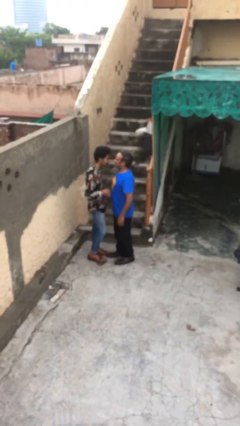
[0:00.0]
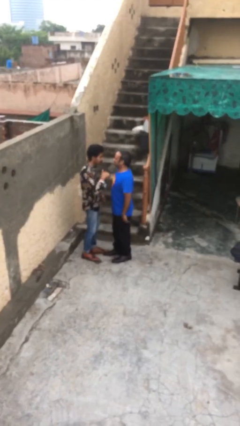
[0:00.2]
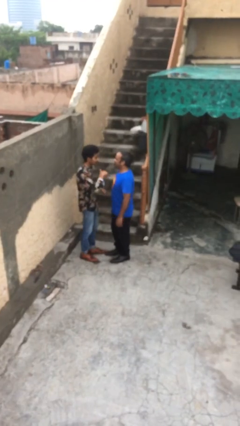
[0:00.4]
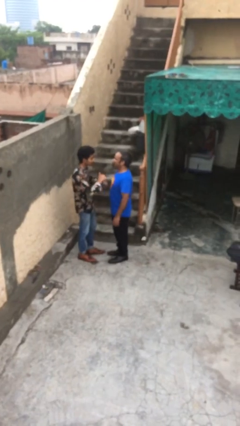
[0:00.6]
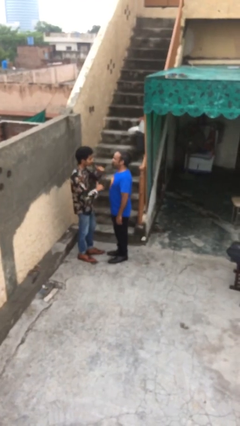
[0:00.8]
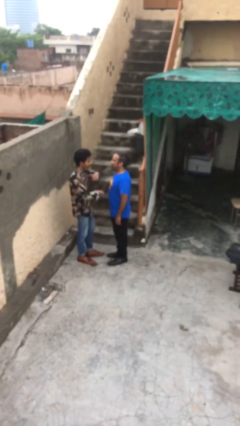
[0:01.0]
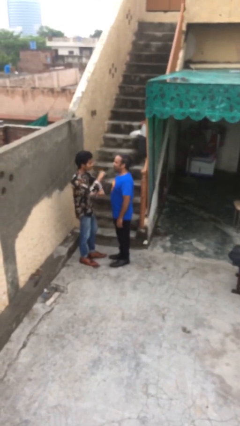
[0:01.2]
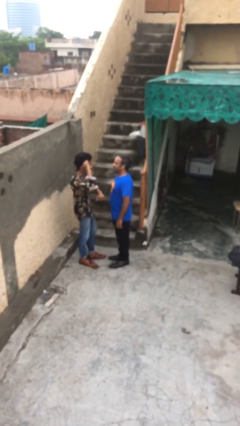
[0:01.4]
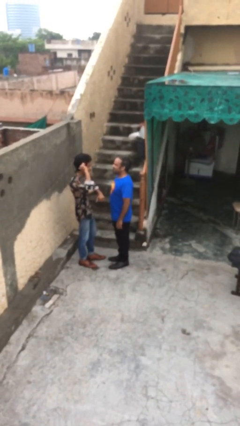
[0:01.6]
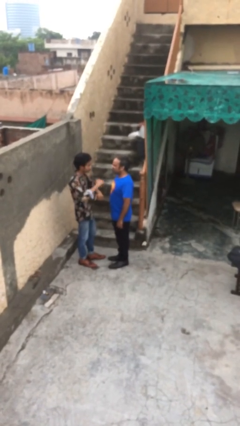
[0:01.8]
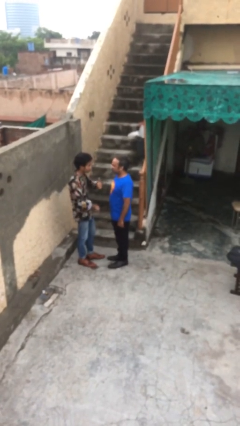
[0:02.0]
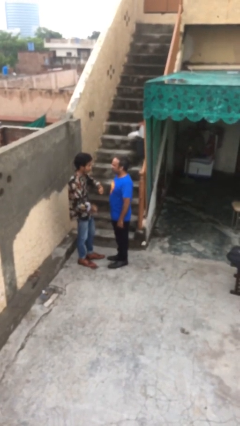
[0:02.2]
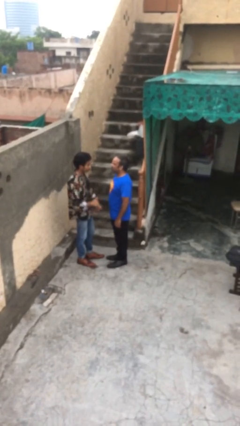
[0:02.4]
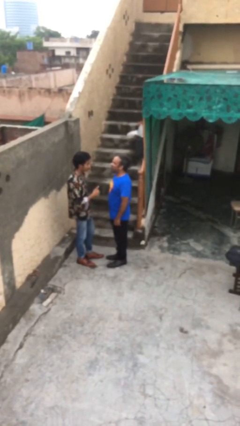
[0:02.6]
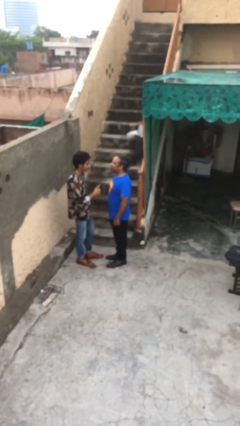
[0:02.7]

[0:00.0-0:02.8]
person talks to person

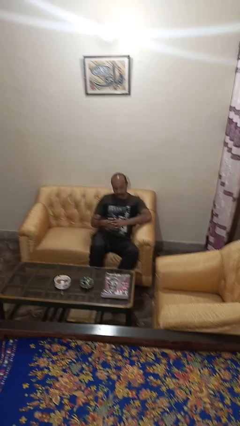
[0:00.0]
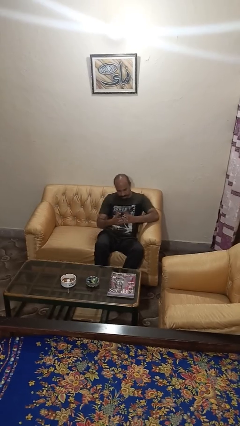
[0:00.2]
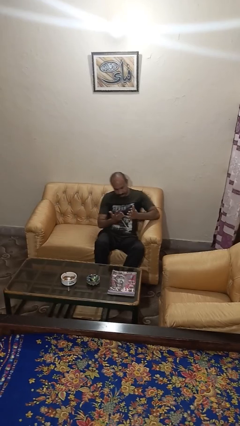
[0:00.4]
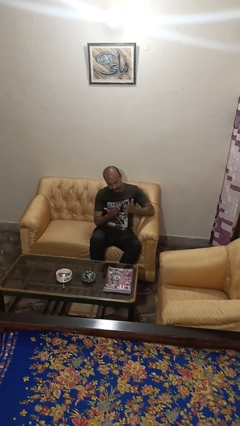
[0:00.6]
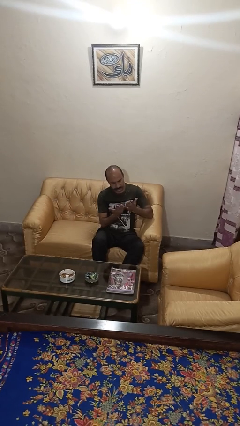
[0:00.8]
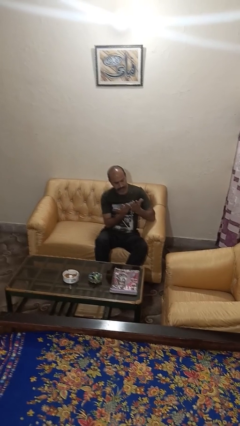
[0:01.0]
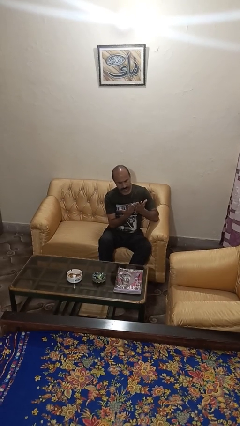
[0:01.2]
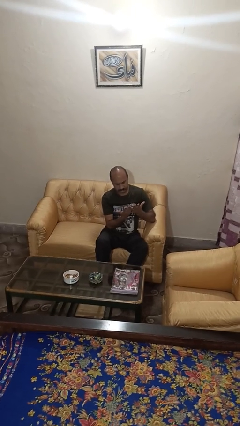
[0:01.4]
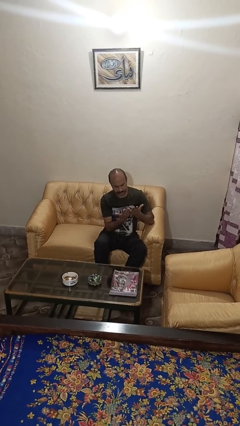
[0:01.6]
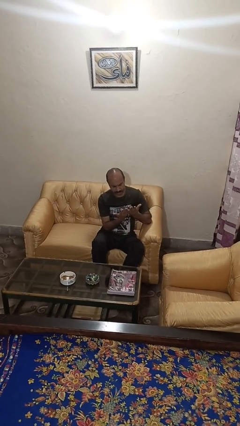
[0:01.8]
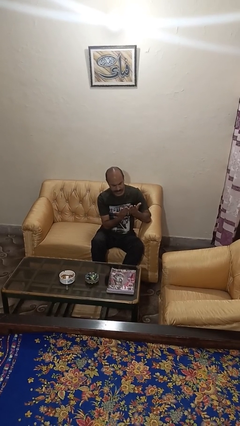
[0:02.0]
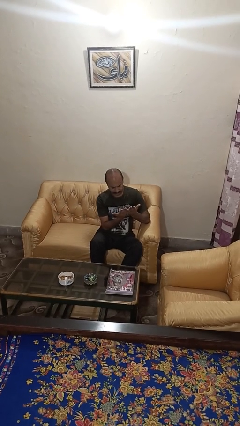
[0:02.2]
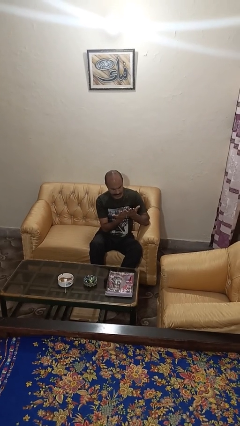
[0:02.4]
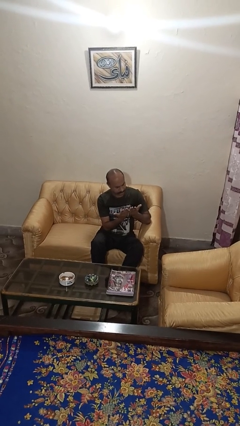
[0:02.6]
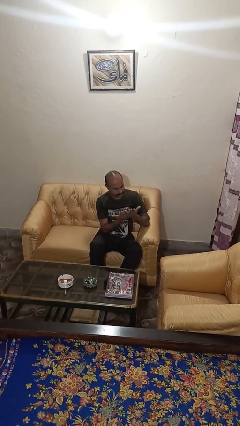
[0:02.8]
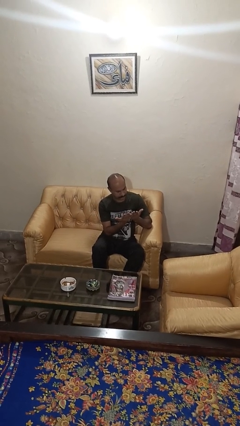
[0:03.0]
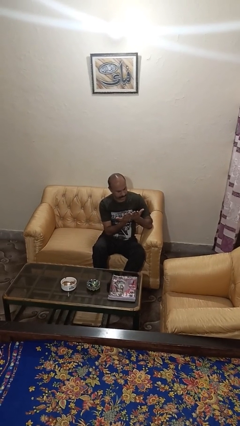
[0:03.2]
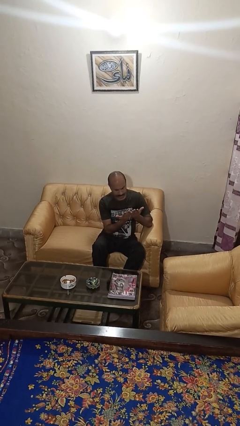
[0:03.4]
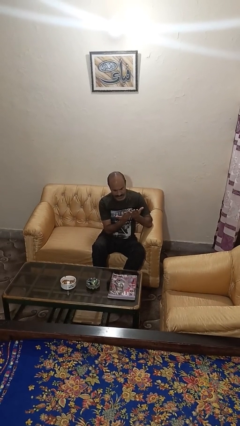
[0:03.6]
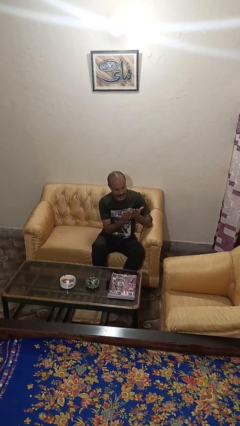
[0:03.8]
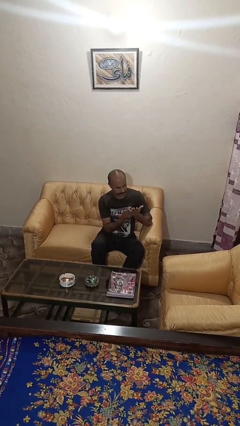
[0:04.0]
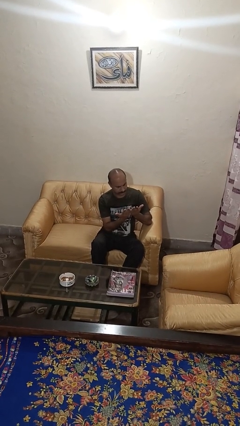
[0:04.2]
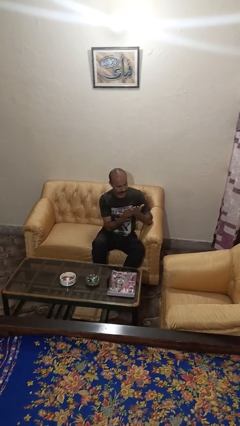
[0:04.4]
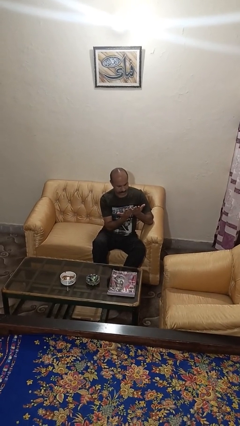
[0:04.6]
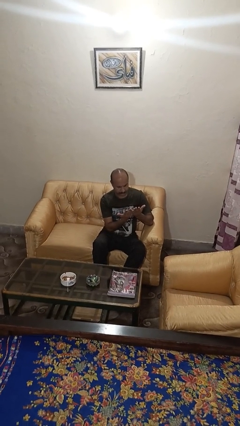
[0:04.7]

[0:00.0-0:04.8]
person looks at hands in lap

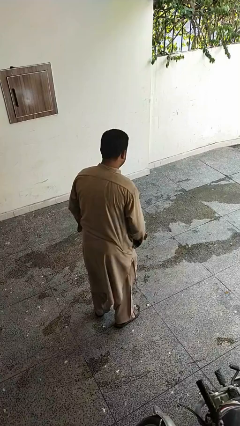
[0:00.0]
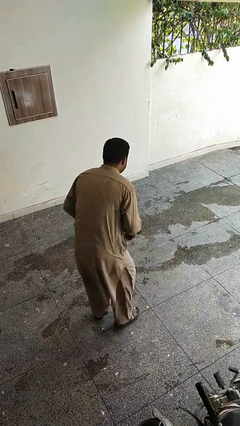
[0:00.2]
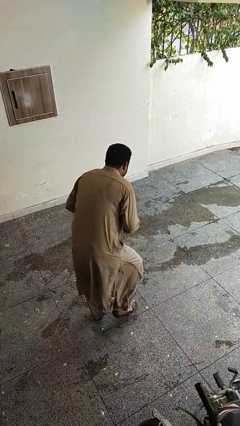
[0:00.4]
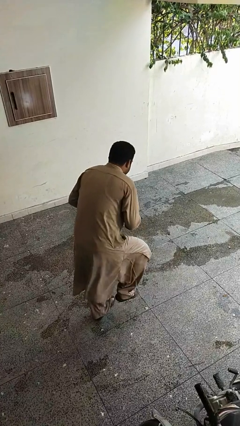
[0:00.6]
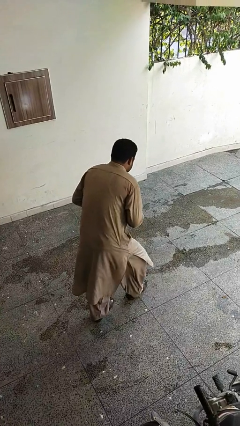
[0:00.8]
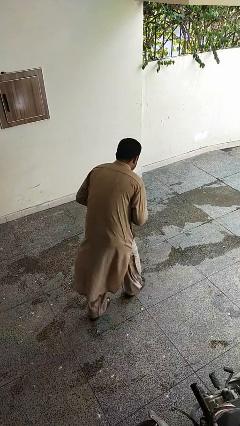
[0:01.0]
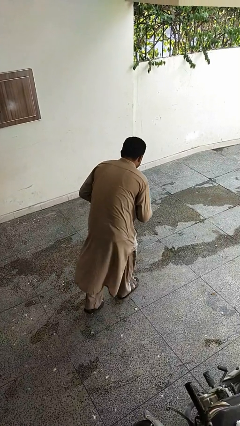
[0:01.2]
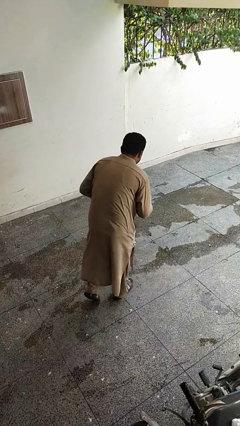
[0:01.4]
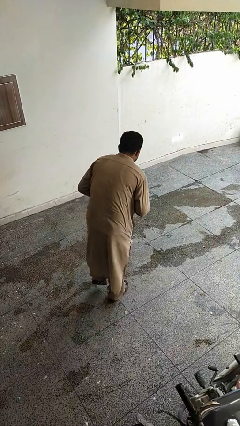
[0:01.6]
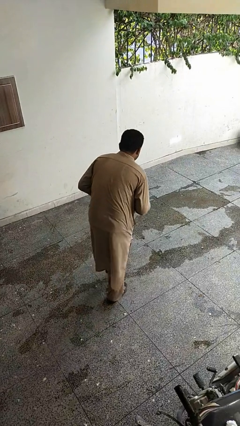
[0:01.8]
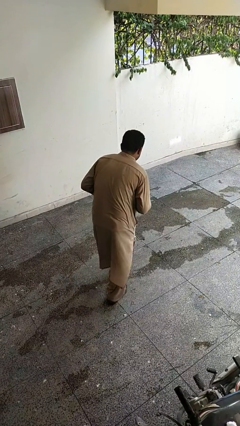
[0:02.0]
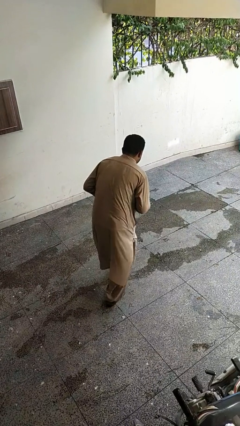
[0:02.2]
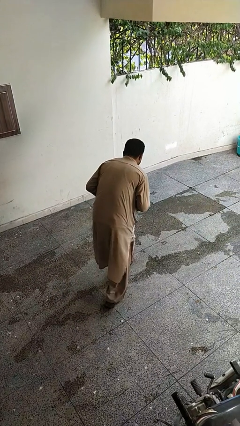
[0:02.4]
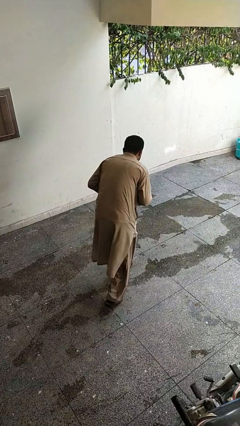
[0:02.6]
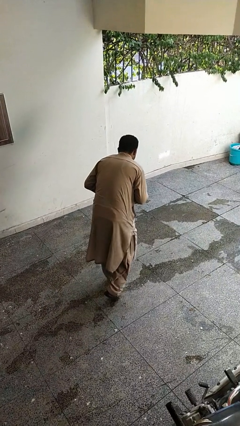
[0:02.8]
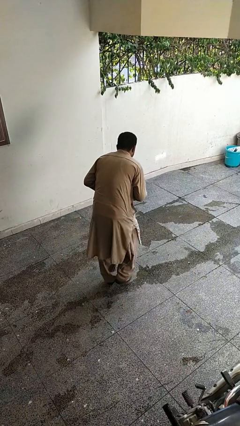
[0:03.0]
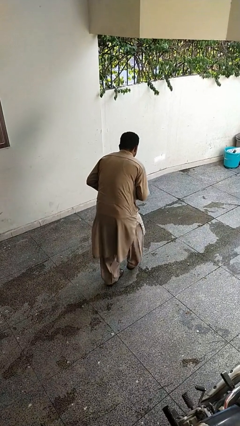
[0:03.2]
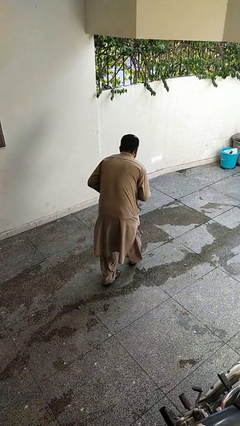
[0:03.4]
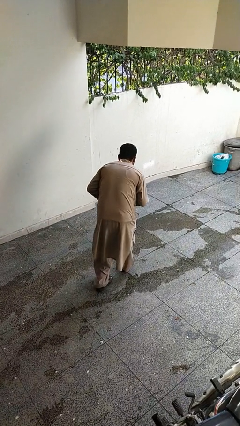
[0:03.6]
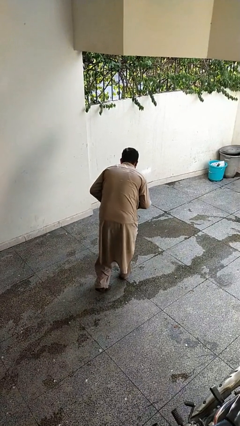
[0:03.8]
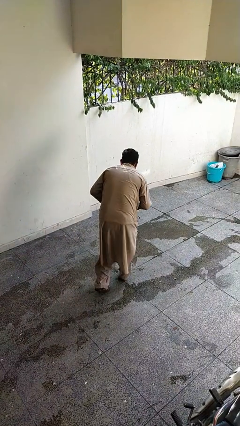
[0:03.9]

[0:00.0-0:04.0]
person walks tiptoe

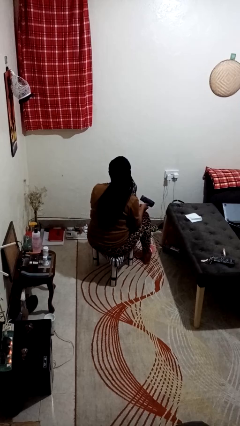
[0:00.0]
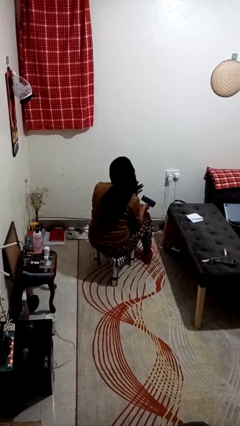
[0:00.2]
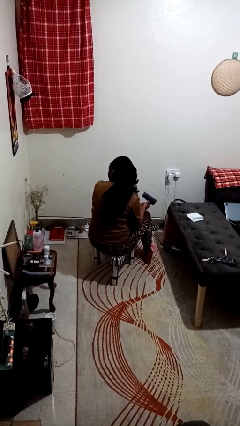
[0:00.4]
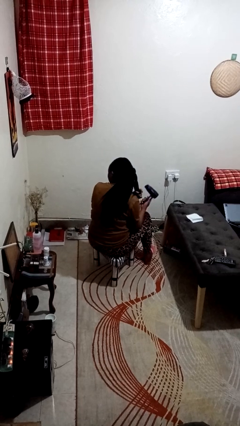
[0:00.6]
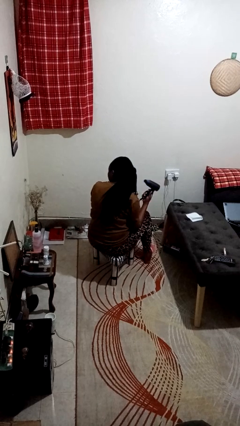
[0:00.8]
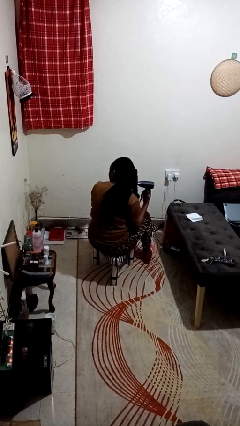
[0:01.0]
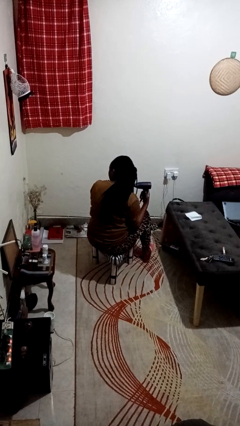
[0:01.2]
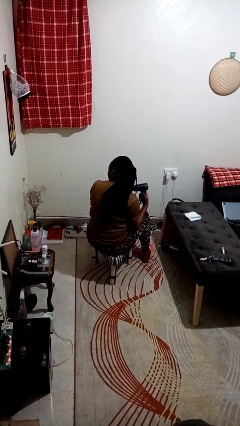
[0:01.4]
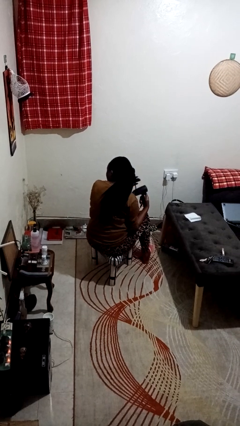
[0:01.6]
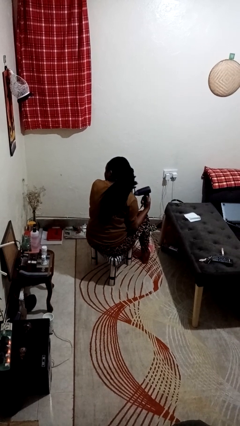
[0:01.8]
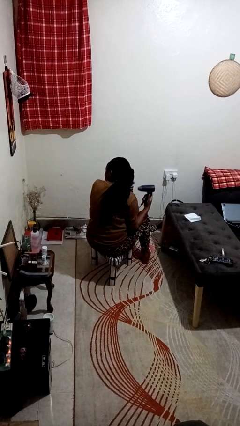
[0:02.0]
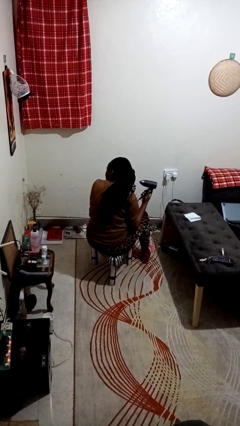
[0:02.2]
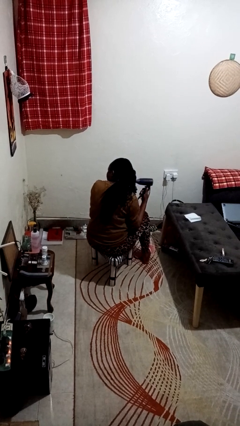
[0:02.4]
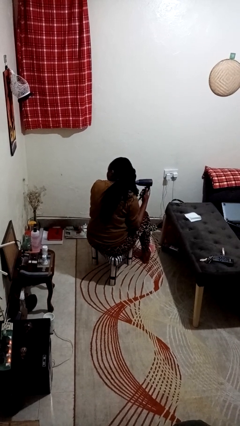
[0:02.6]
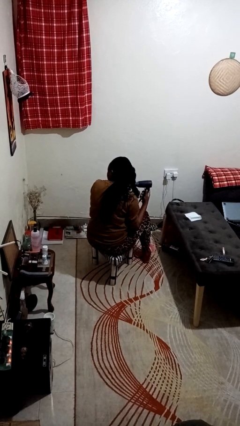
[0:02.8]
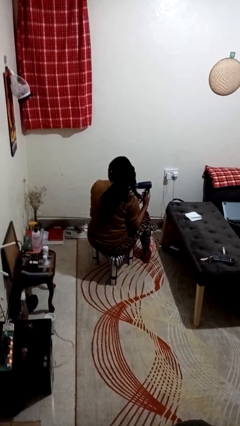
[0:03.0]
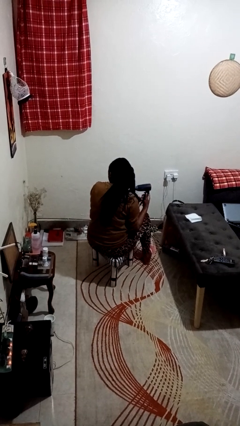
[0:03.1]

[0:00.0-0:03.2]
person dries hair with hairdryer

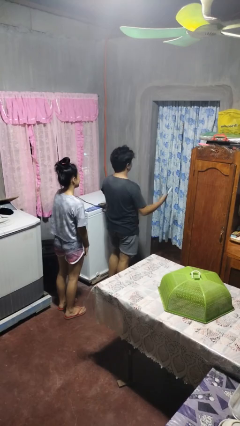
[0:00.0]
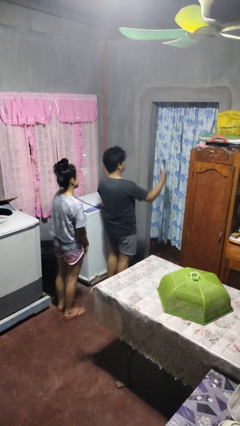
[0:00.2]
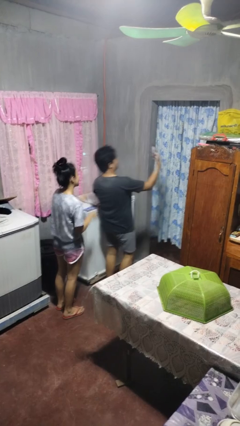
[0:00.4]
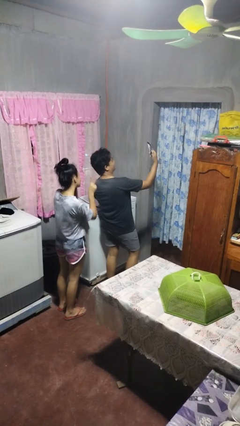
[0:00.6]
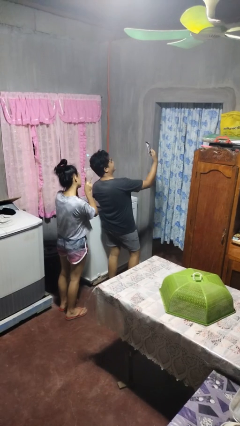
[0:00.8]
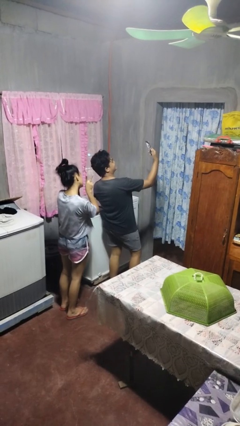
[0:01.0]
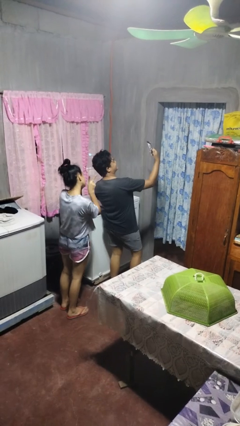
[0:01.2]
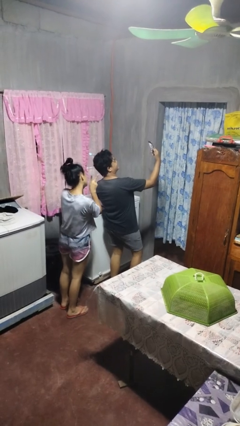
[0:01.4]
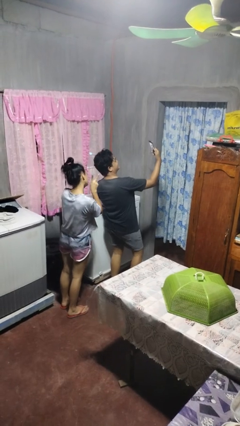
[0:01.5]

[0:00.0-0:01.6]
person takes selfie with person

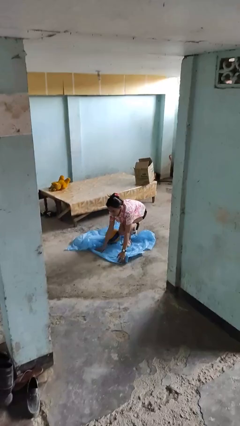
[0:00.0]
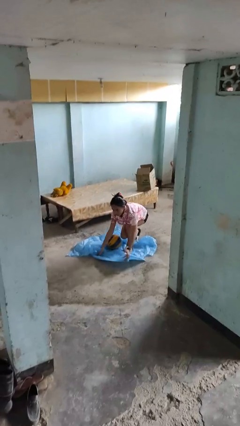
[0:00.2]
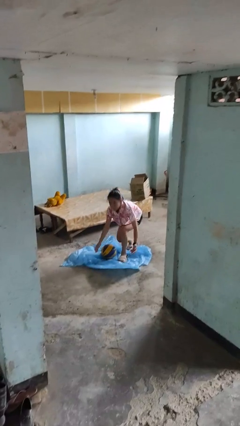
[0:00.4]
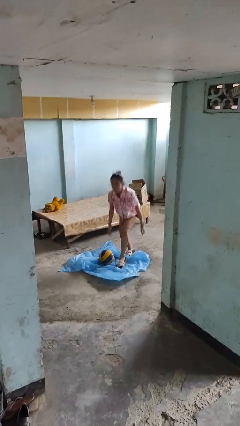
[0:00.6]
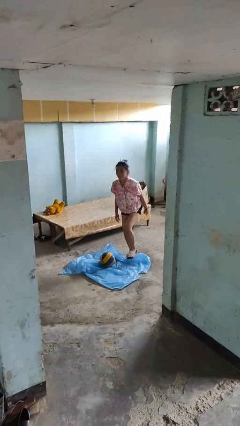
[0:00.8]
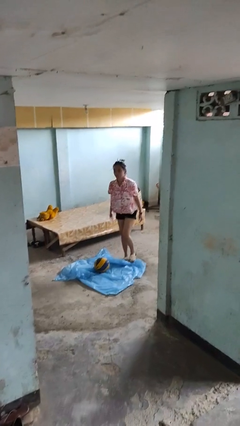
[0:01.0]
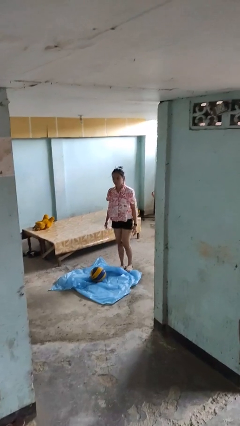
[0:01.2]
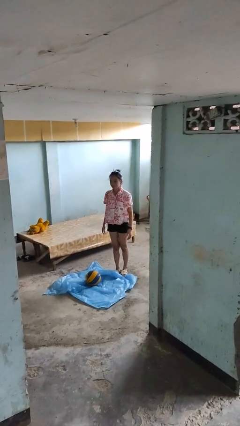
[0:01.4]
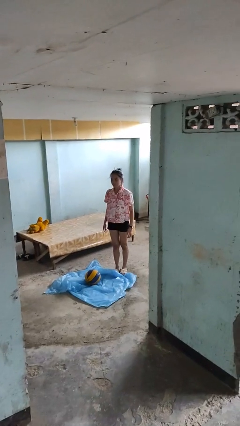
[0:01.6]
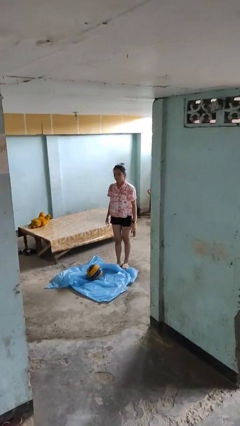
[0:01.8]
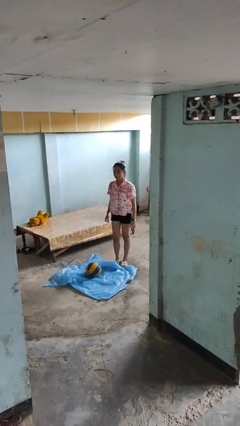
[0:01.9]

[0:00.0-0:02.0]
person stands up from floor
